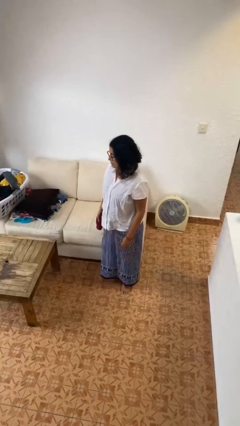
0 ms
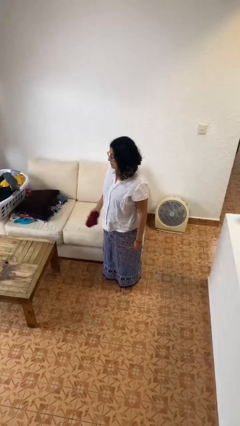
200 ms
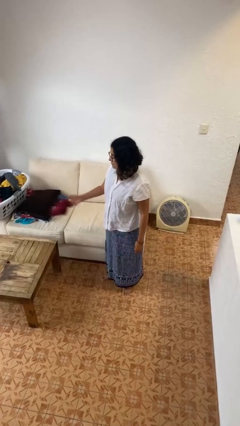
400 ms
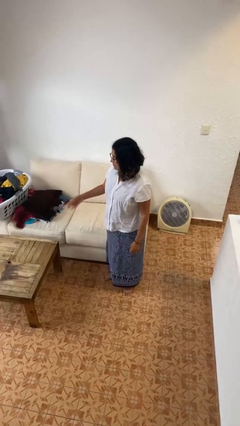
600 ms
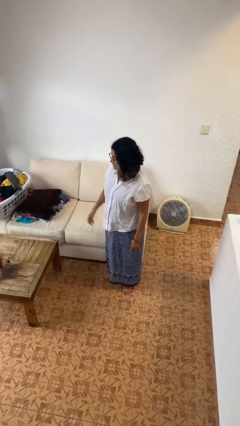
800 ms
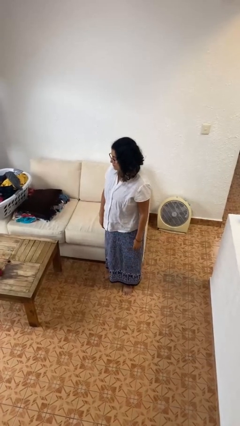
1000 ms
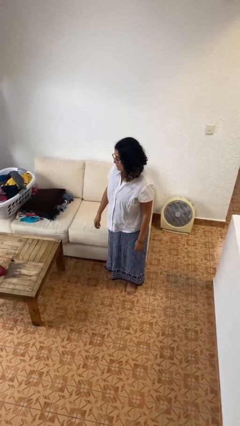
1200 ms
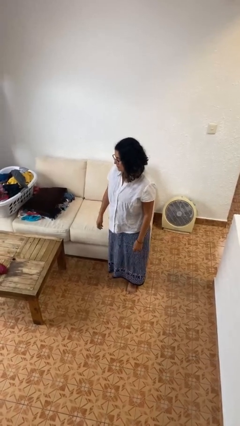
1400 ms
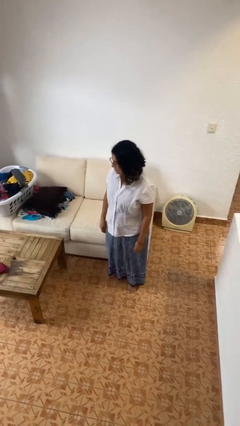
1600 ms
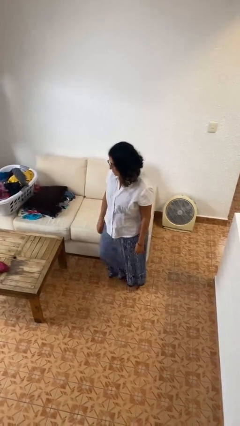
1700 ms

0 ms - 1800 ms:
person throws object on table

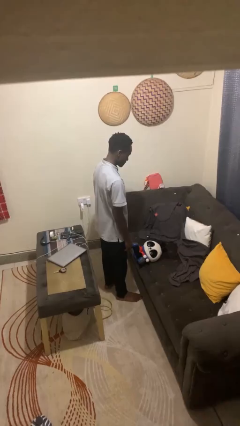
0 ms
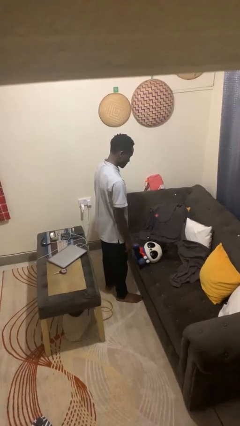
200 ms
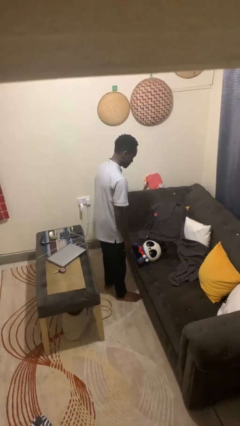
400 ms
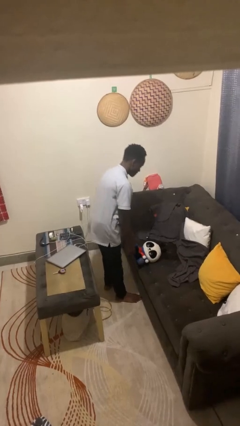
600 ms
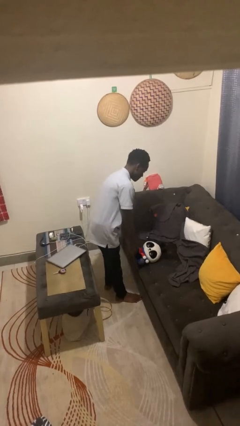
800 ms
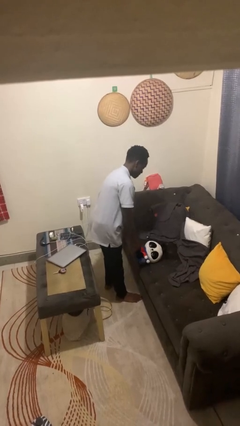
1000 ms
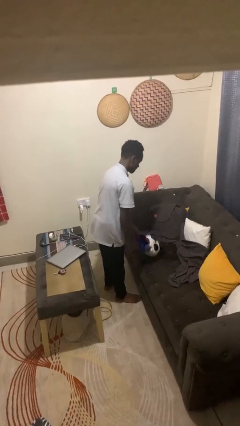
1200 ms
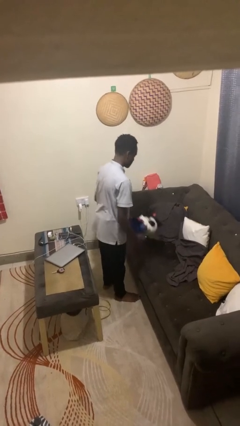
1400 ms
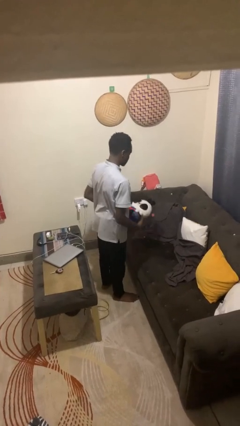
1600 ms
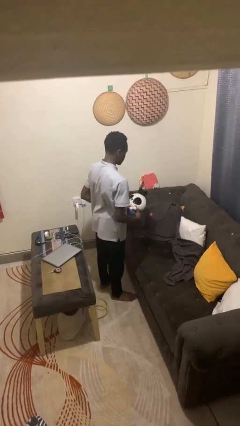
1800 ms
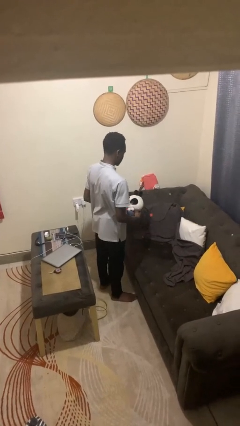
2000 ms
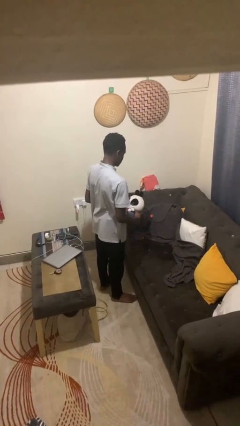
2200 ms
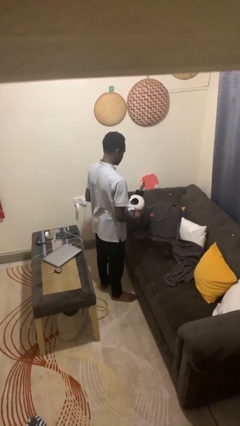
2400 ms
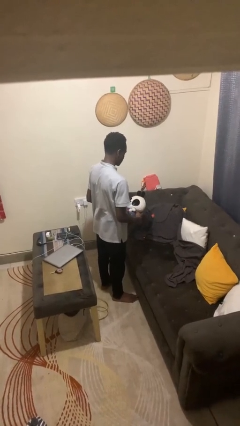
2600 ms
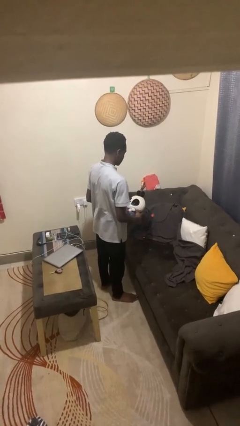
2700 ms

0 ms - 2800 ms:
person picks up object from couch

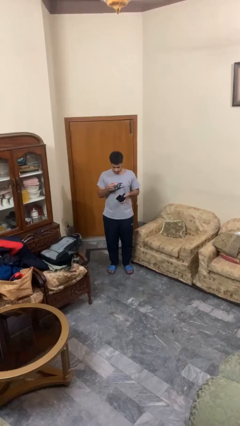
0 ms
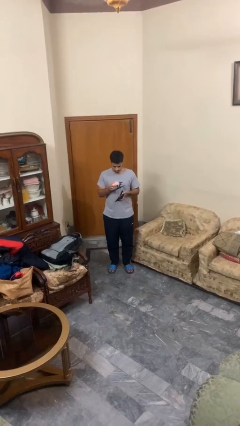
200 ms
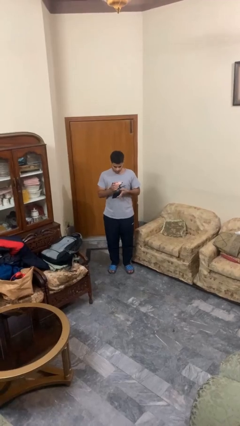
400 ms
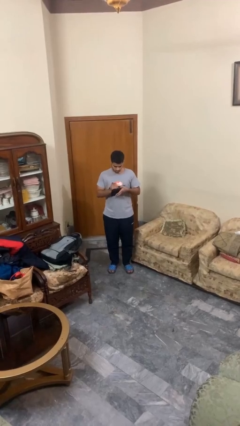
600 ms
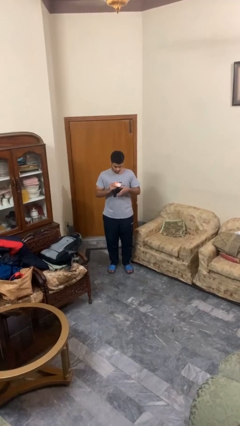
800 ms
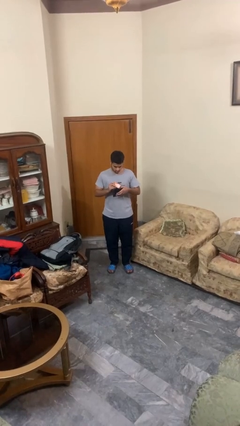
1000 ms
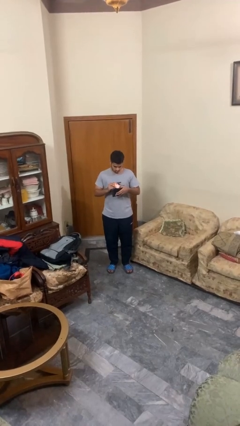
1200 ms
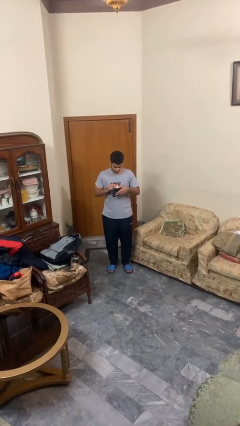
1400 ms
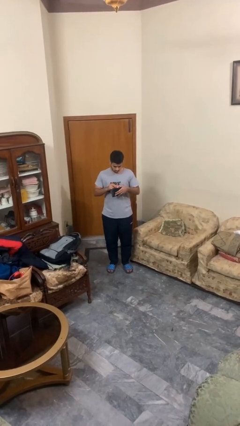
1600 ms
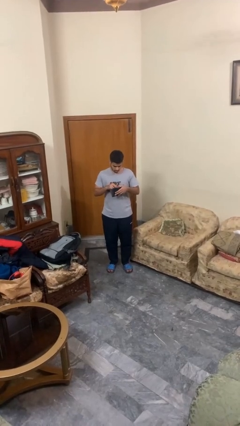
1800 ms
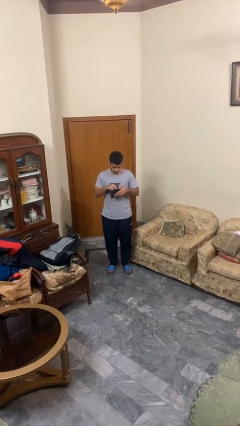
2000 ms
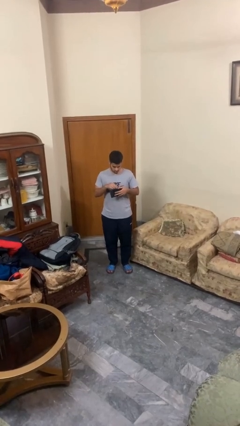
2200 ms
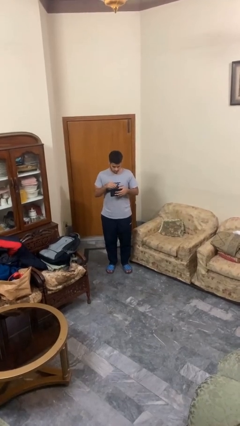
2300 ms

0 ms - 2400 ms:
person puts object into purse

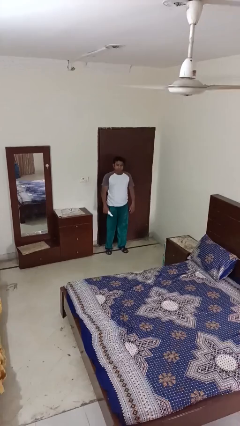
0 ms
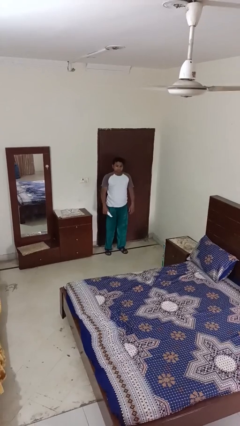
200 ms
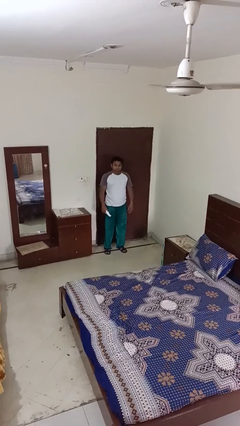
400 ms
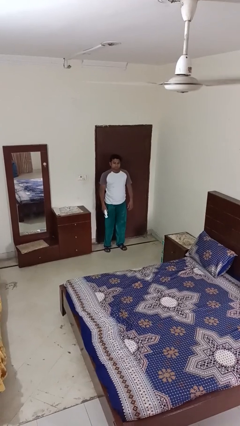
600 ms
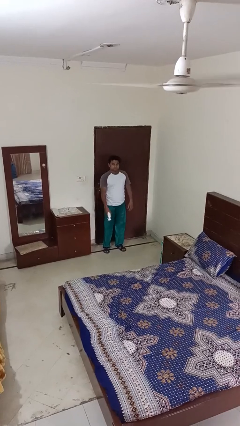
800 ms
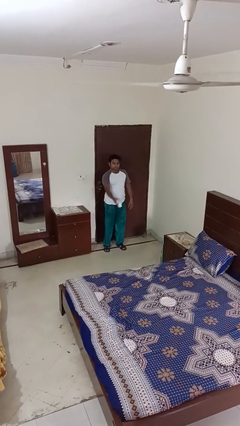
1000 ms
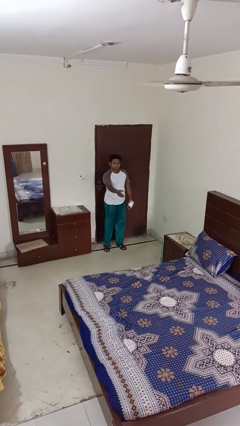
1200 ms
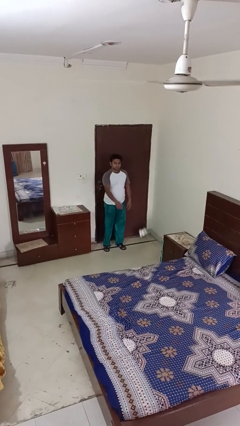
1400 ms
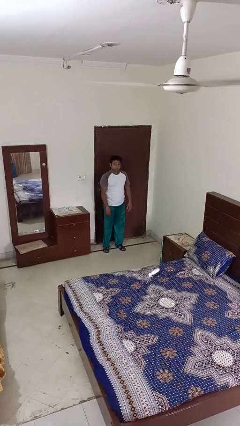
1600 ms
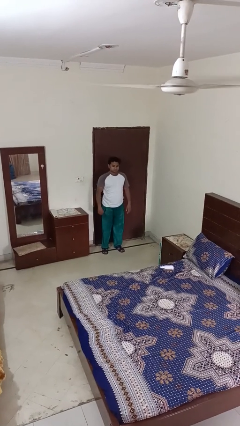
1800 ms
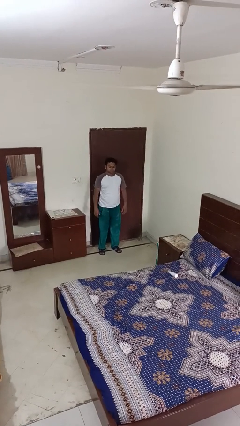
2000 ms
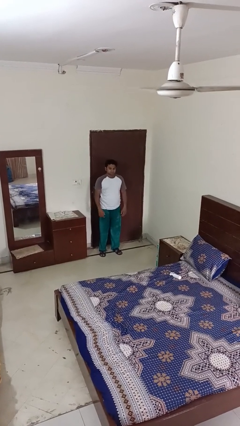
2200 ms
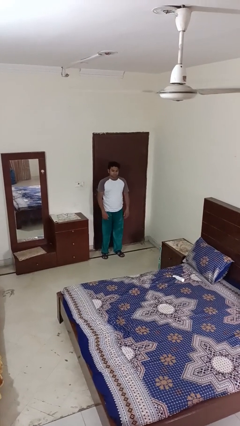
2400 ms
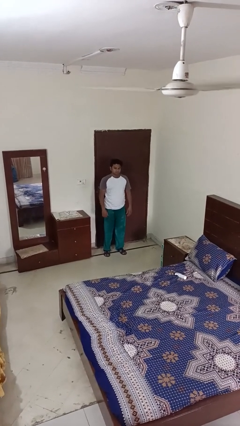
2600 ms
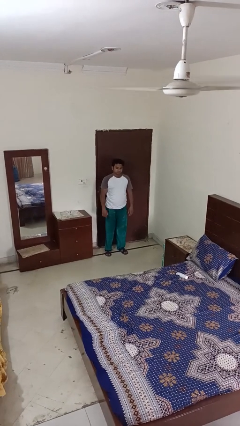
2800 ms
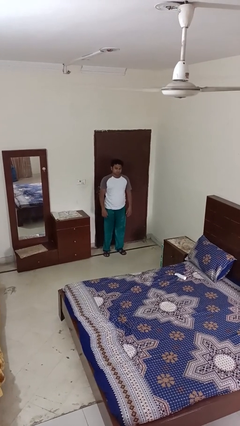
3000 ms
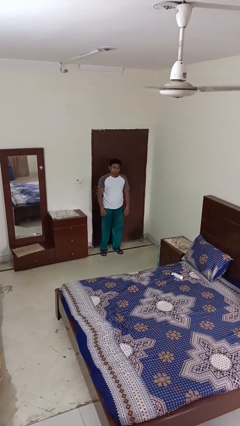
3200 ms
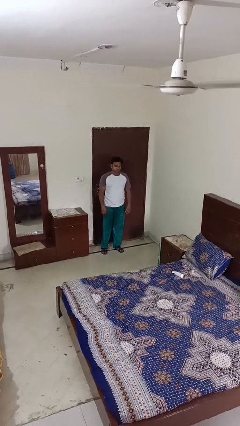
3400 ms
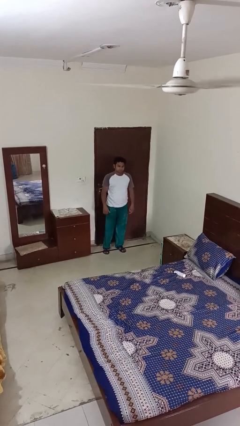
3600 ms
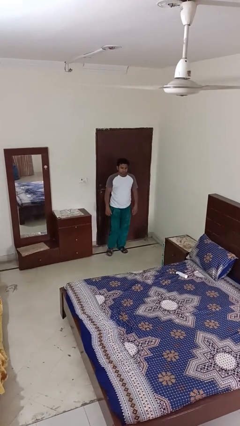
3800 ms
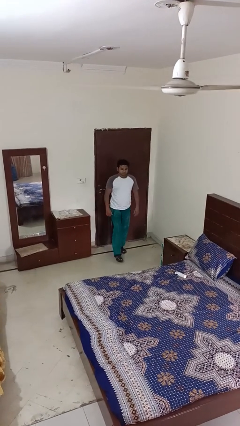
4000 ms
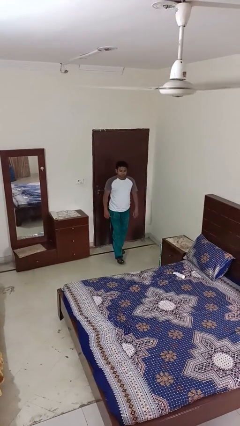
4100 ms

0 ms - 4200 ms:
person throws object on bed

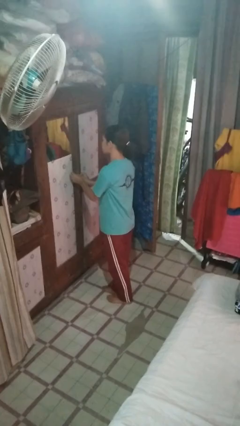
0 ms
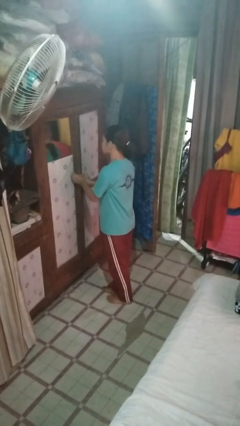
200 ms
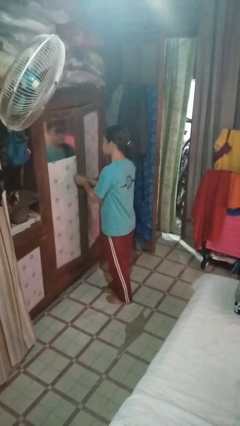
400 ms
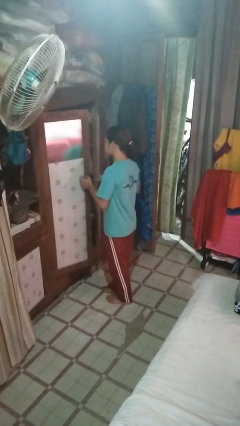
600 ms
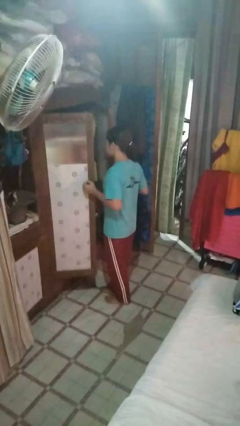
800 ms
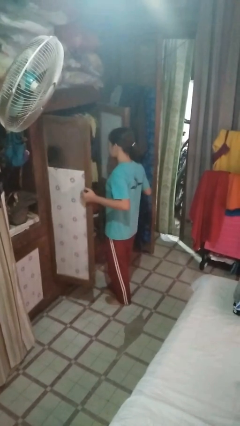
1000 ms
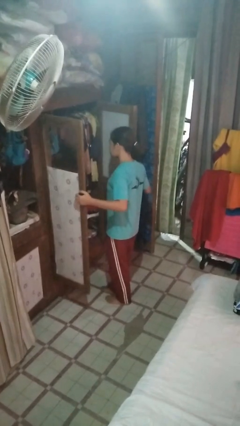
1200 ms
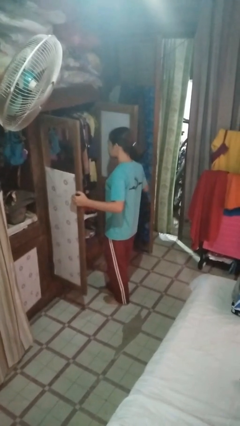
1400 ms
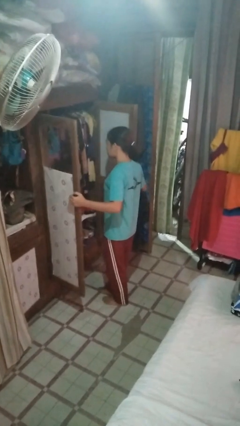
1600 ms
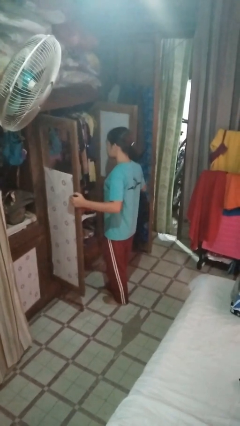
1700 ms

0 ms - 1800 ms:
person opens closet door

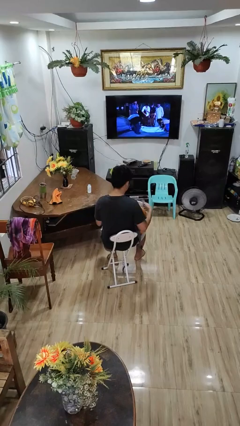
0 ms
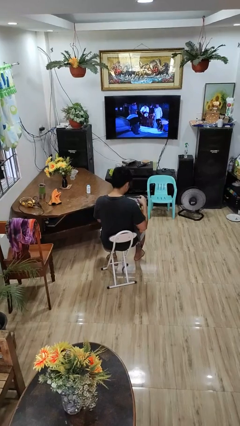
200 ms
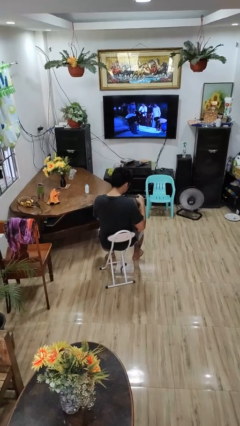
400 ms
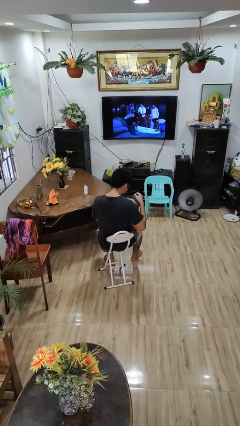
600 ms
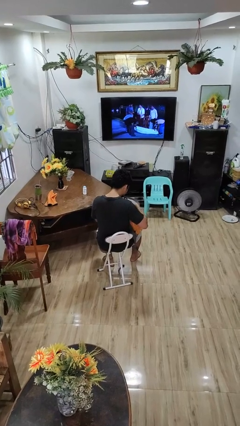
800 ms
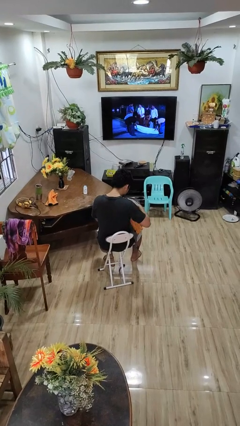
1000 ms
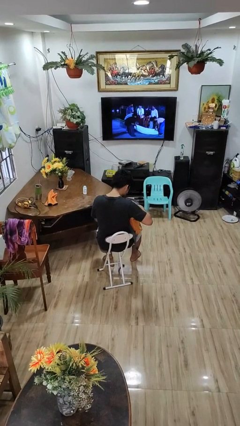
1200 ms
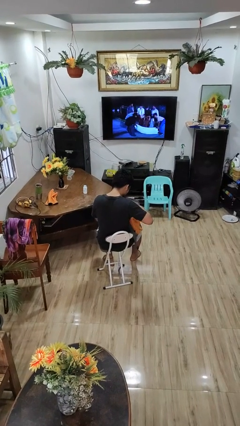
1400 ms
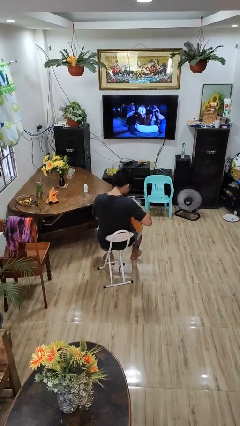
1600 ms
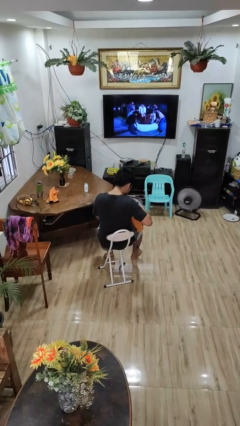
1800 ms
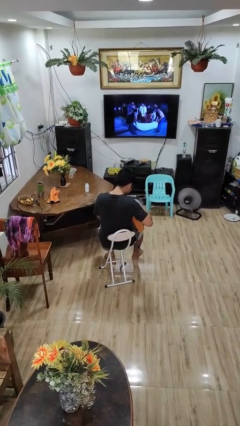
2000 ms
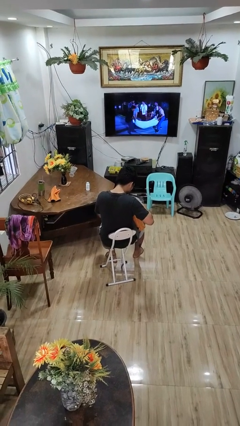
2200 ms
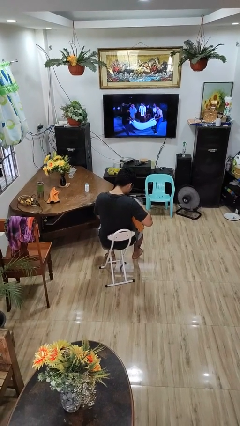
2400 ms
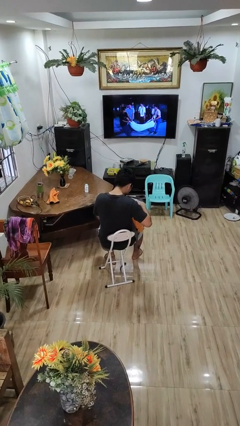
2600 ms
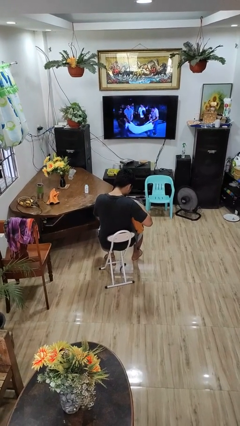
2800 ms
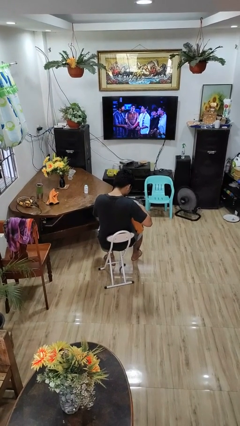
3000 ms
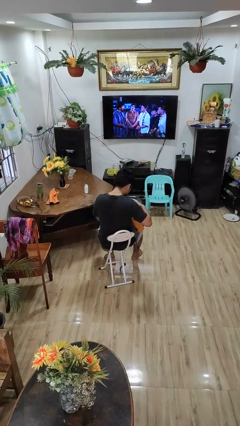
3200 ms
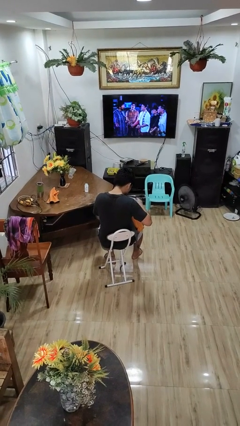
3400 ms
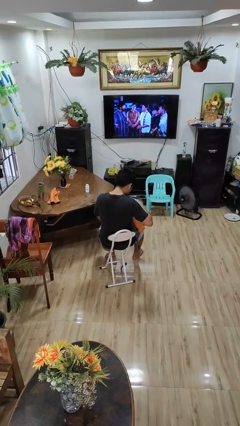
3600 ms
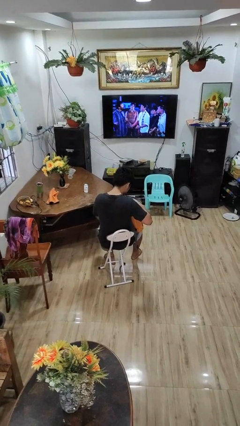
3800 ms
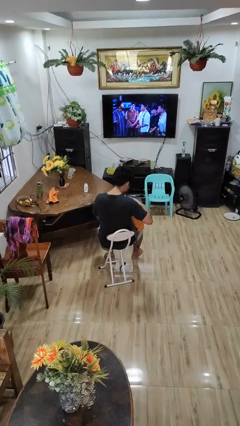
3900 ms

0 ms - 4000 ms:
person searches in backpack

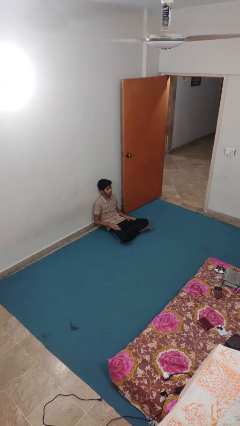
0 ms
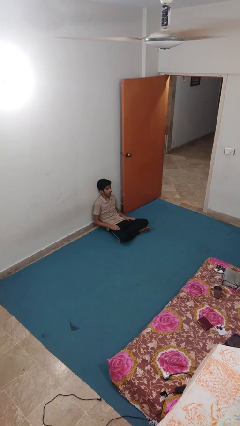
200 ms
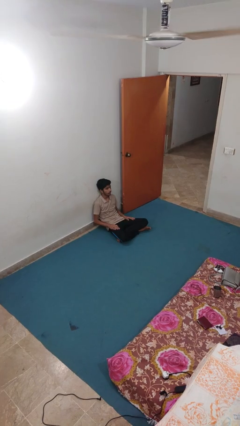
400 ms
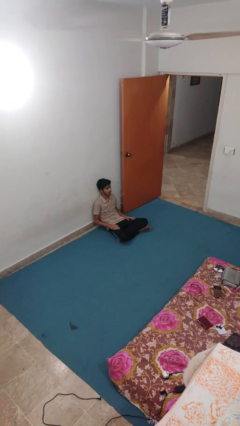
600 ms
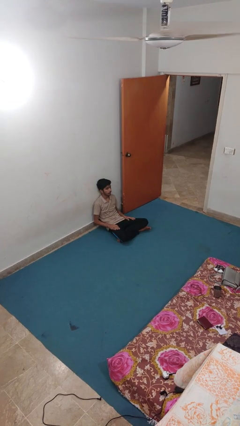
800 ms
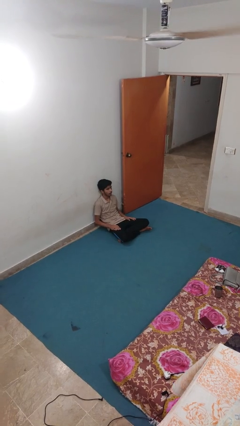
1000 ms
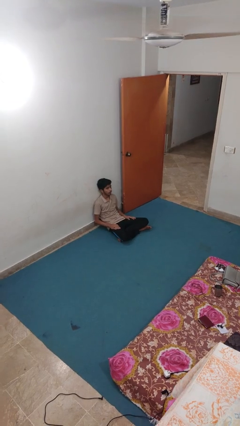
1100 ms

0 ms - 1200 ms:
person slaps hands on thighs
